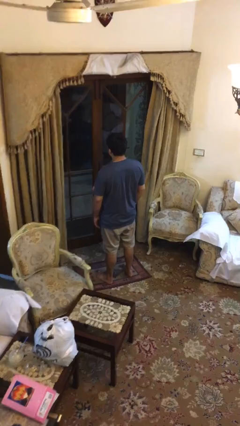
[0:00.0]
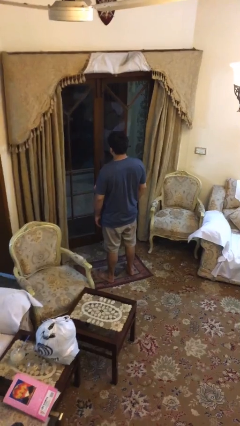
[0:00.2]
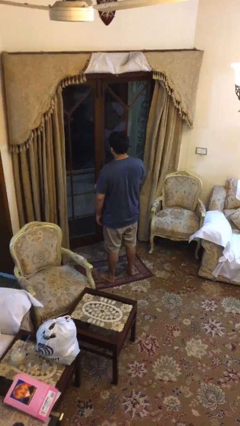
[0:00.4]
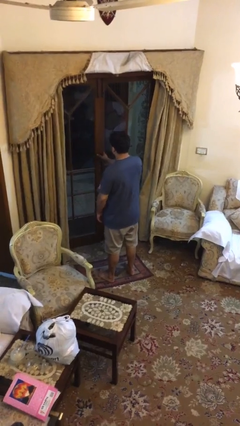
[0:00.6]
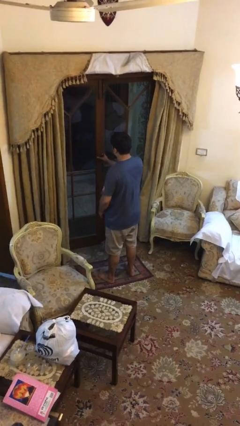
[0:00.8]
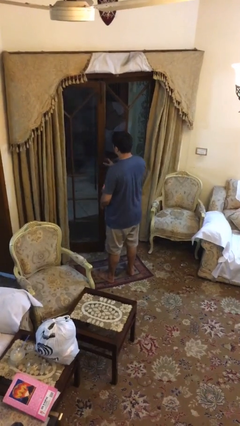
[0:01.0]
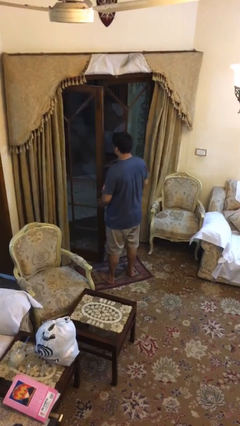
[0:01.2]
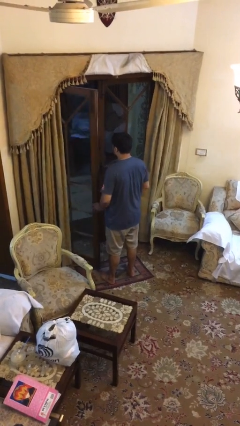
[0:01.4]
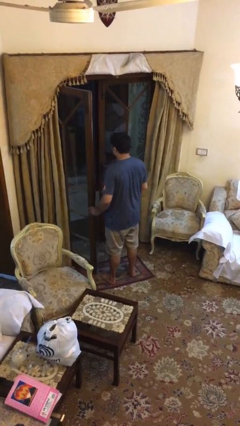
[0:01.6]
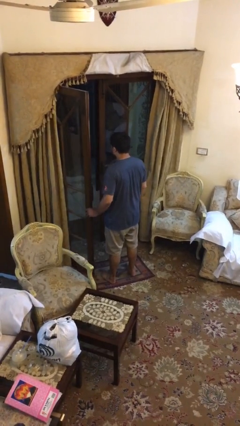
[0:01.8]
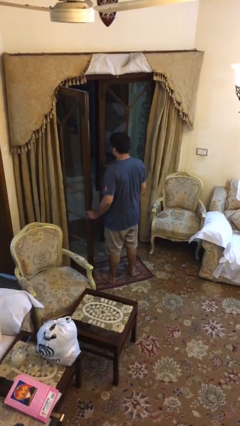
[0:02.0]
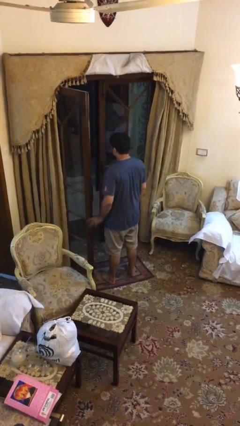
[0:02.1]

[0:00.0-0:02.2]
person opens facility door

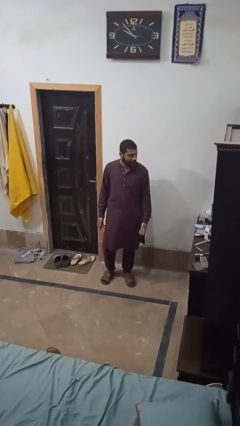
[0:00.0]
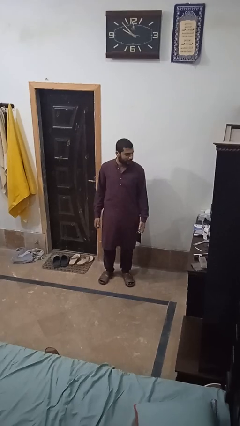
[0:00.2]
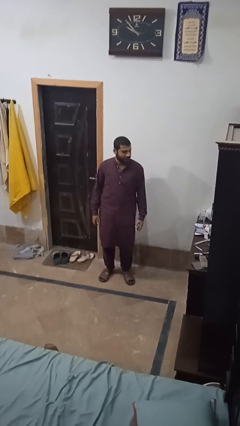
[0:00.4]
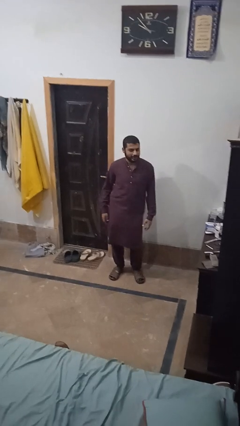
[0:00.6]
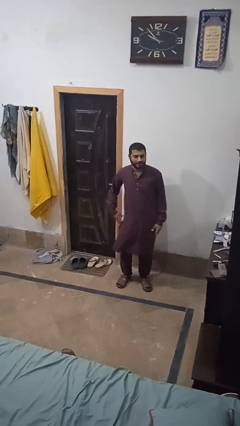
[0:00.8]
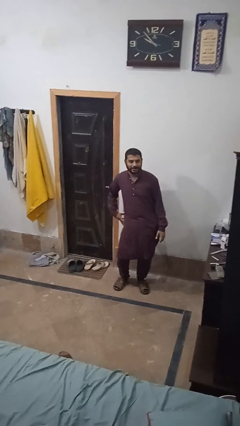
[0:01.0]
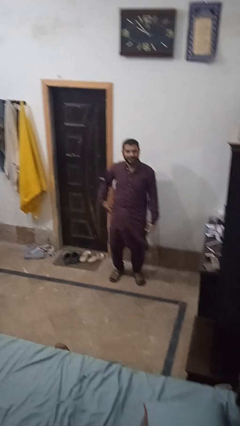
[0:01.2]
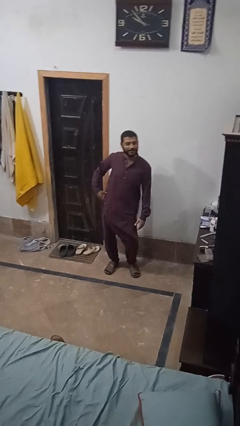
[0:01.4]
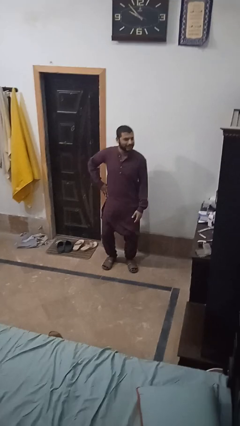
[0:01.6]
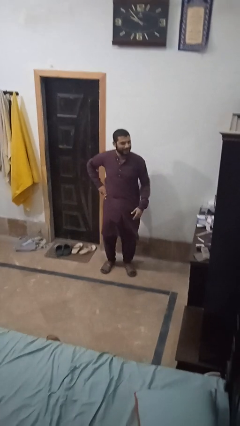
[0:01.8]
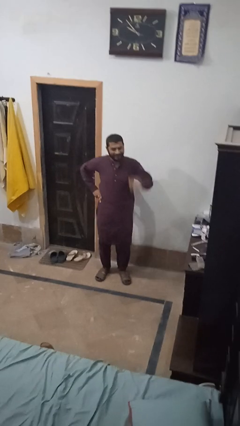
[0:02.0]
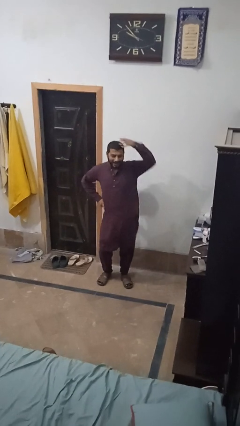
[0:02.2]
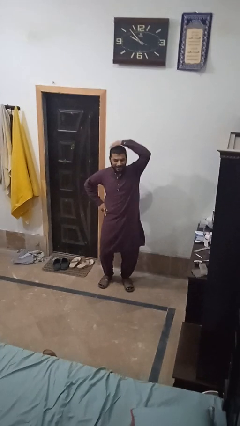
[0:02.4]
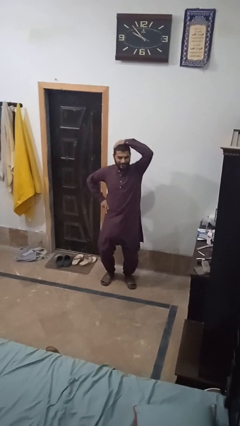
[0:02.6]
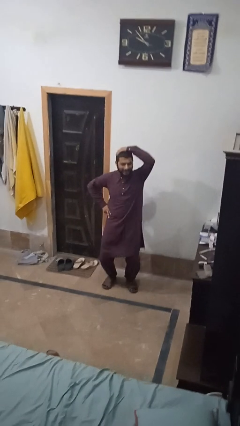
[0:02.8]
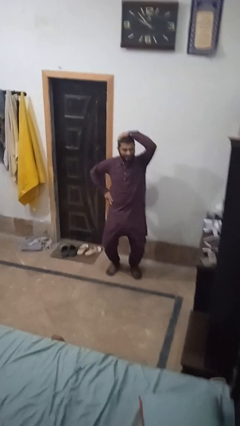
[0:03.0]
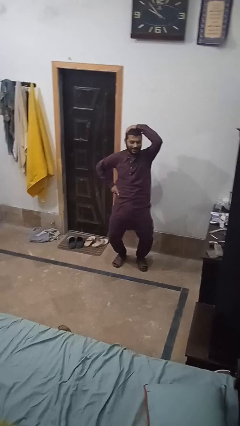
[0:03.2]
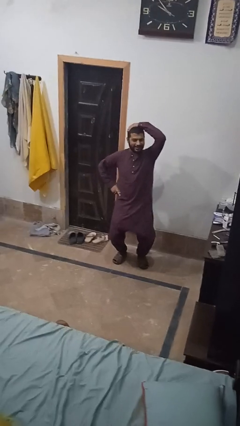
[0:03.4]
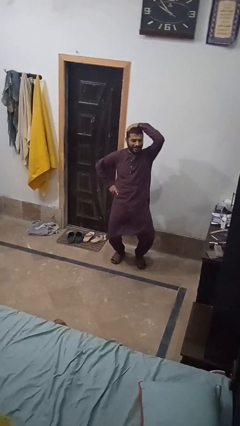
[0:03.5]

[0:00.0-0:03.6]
person dances in place

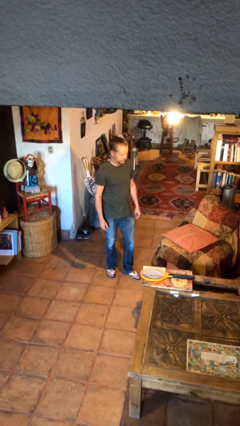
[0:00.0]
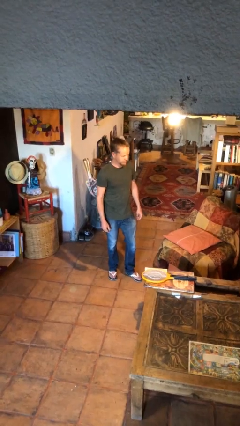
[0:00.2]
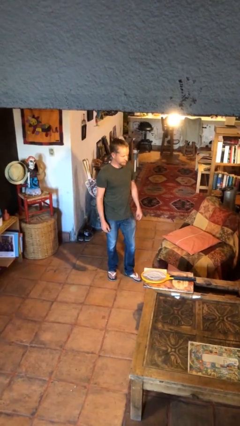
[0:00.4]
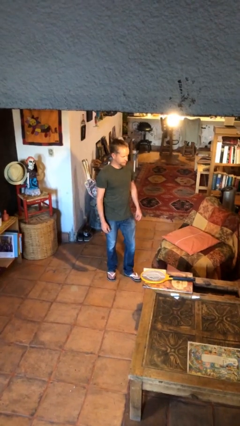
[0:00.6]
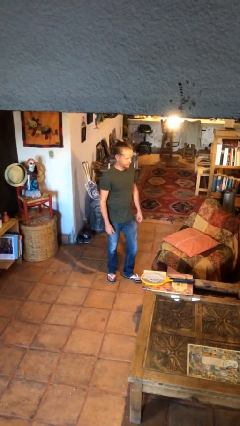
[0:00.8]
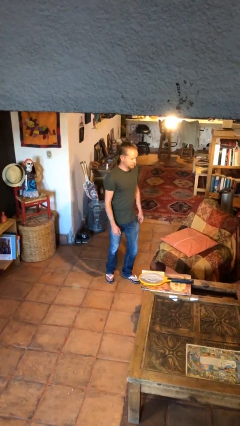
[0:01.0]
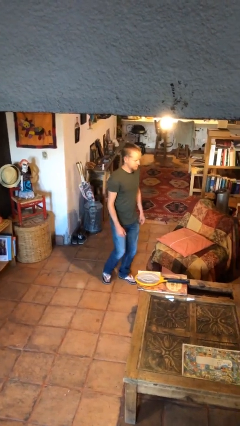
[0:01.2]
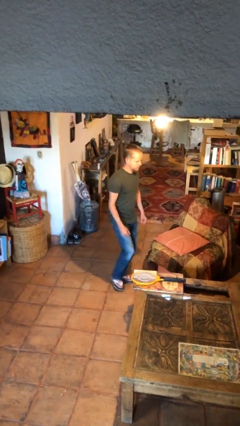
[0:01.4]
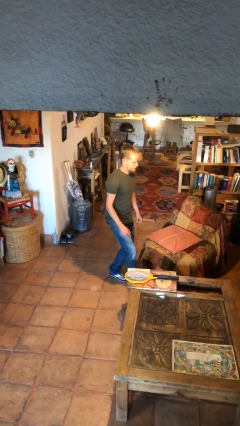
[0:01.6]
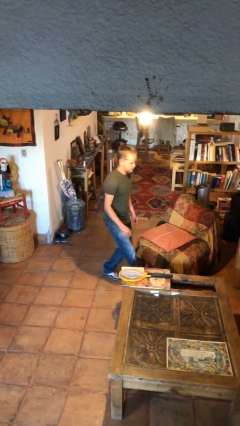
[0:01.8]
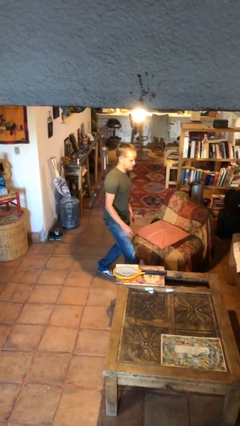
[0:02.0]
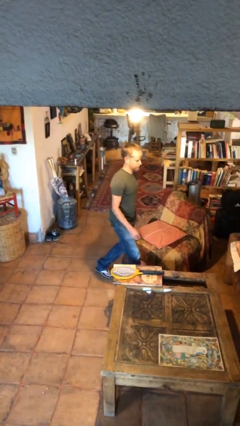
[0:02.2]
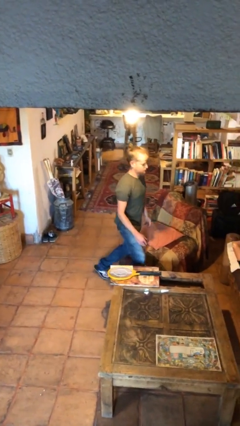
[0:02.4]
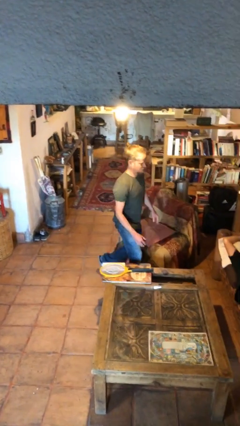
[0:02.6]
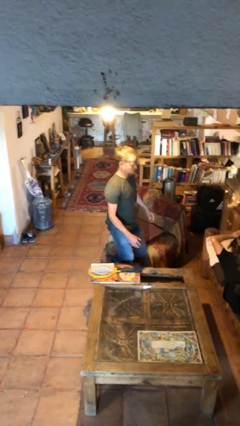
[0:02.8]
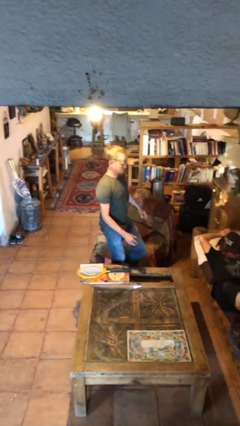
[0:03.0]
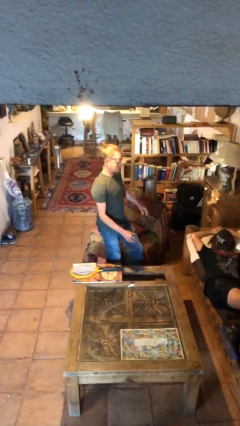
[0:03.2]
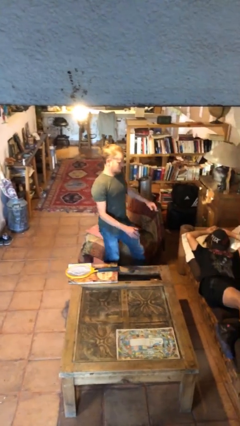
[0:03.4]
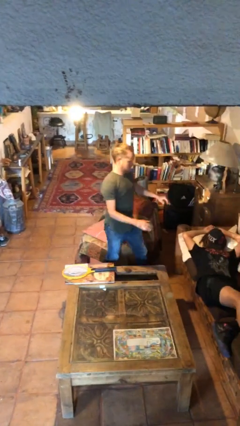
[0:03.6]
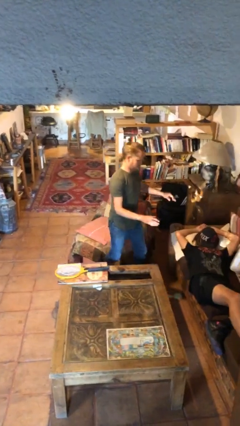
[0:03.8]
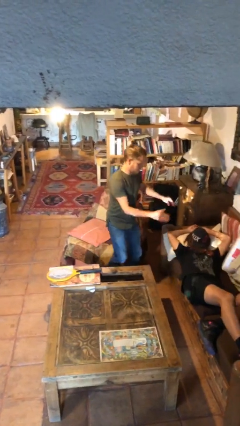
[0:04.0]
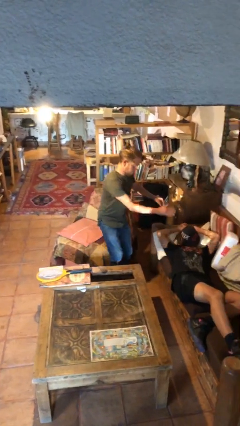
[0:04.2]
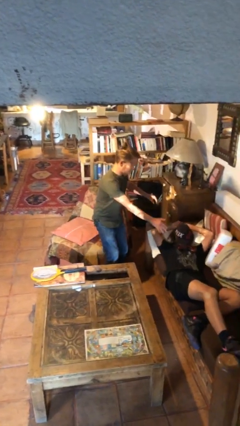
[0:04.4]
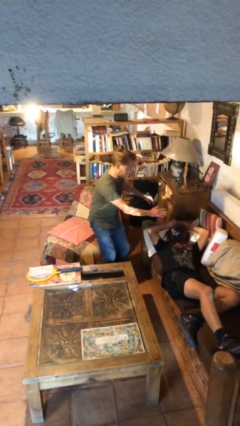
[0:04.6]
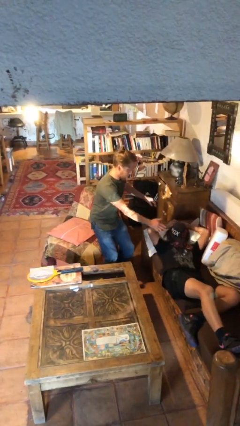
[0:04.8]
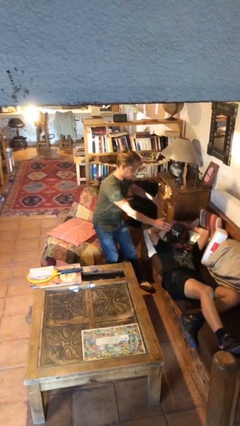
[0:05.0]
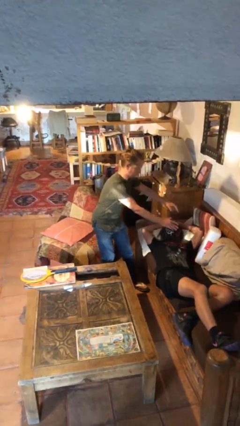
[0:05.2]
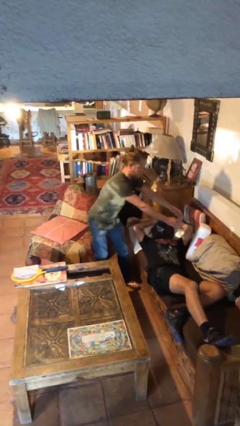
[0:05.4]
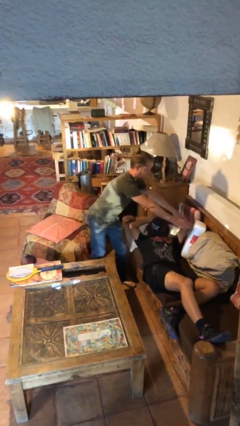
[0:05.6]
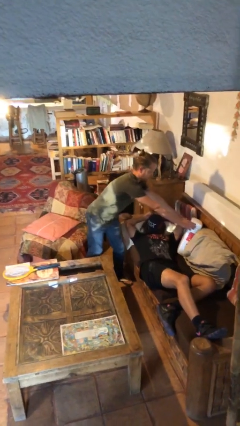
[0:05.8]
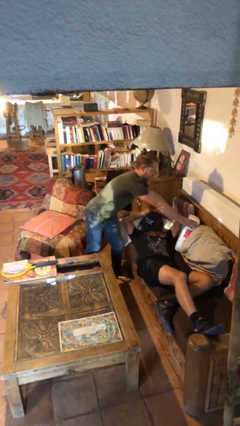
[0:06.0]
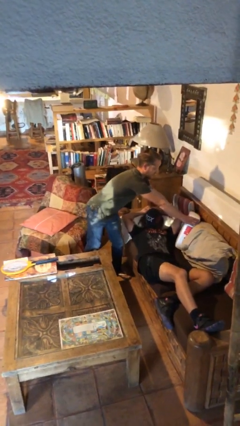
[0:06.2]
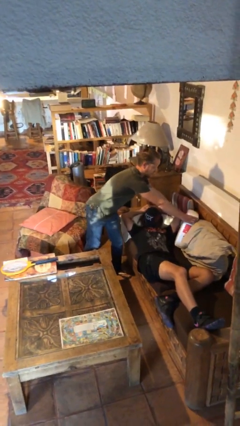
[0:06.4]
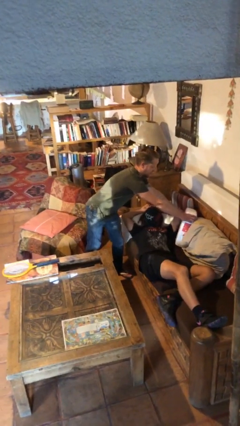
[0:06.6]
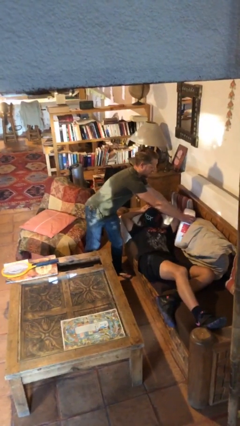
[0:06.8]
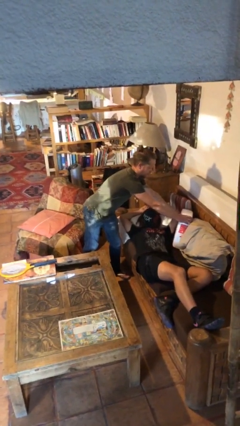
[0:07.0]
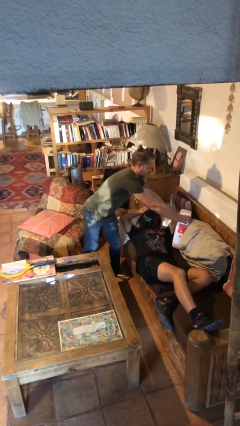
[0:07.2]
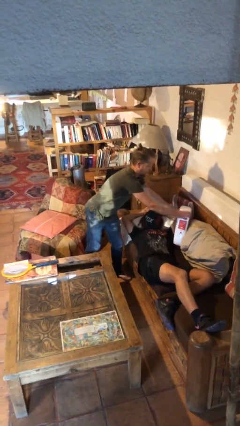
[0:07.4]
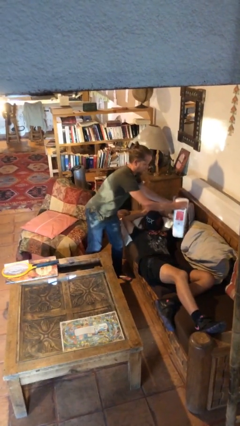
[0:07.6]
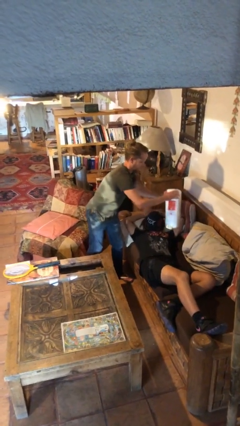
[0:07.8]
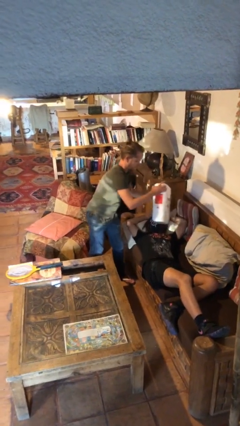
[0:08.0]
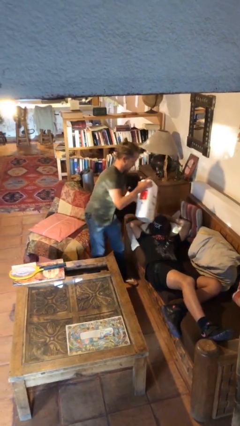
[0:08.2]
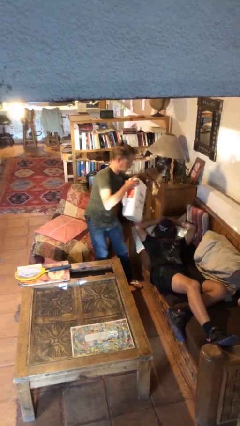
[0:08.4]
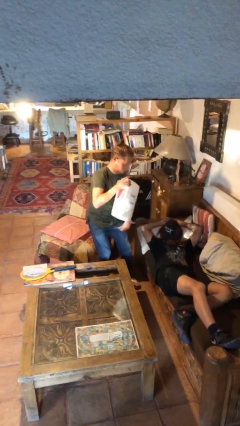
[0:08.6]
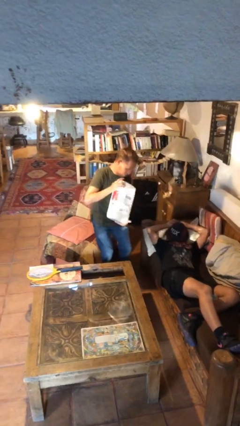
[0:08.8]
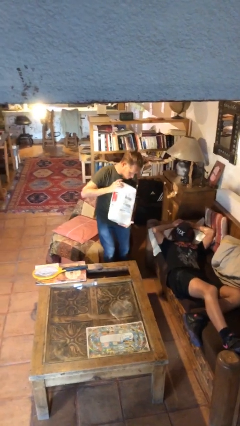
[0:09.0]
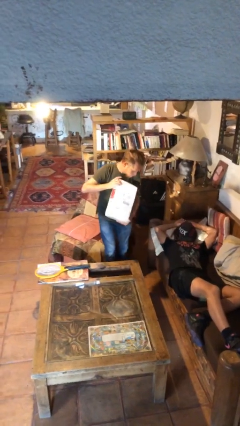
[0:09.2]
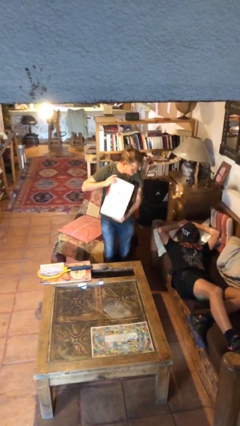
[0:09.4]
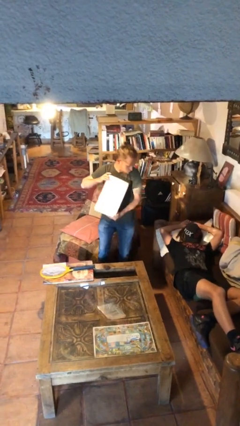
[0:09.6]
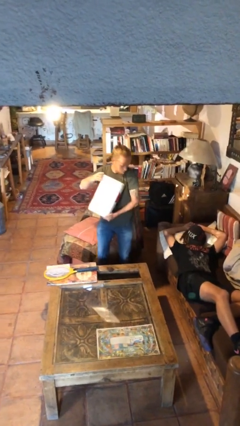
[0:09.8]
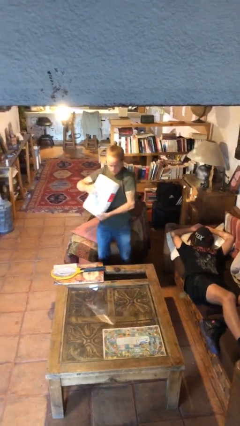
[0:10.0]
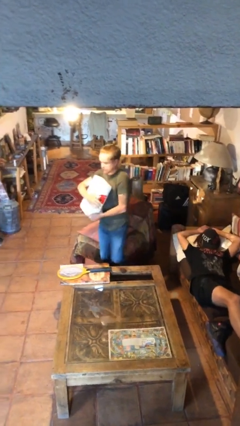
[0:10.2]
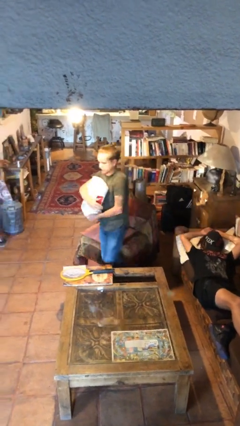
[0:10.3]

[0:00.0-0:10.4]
person steals object from person

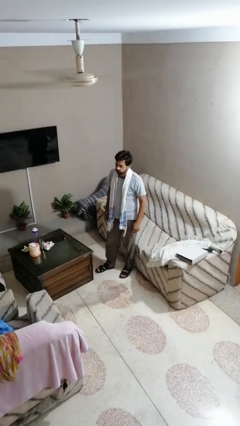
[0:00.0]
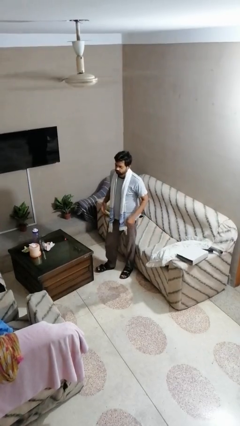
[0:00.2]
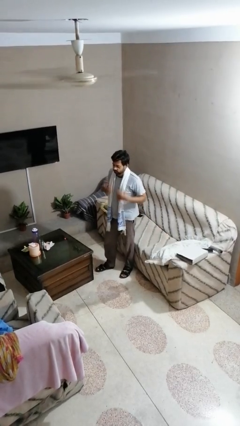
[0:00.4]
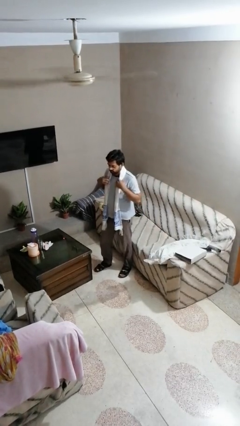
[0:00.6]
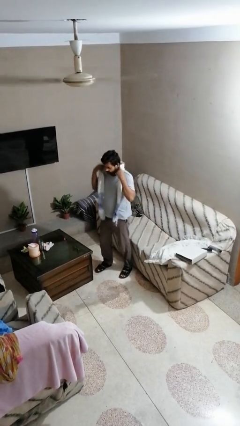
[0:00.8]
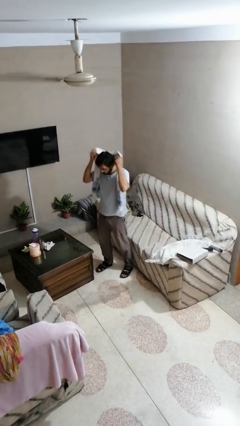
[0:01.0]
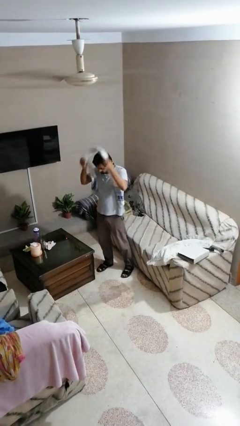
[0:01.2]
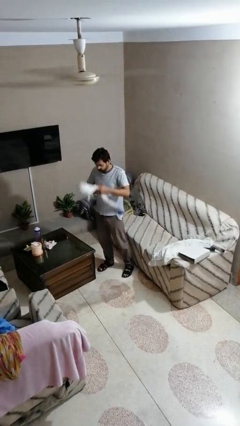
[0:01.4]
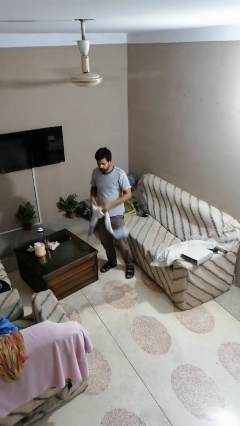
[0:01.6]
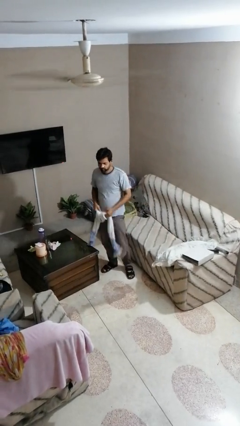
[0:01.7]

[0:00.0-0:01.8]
person takes off scarf
